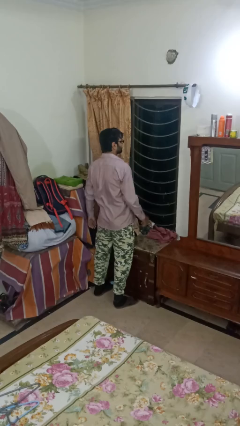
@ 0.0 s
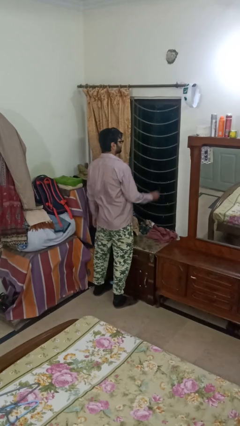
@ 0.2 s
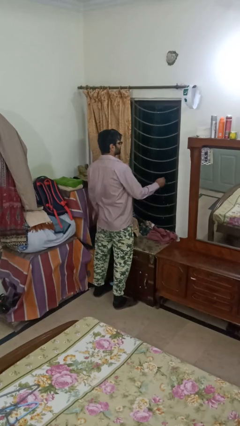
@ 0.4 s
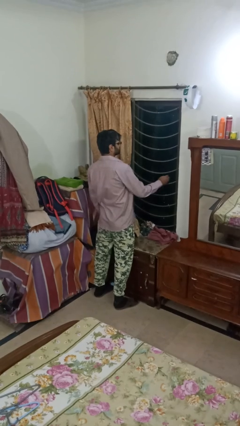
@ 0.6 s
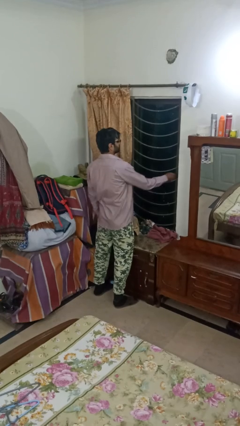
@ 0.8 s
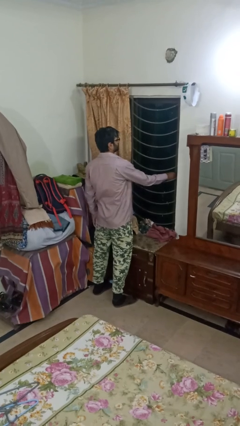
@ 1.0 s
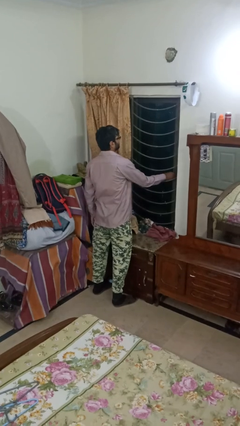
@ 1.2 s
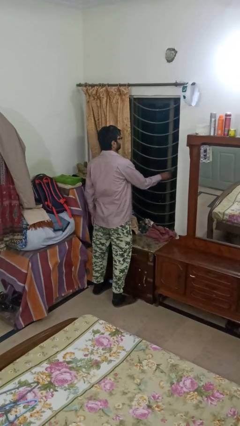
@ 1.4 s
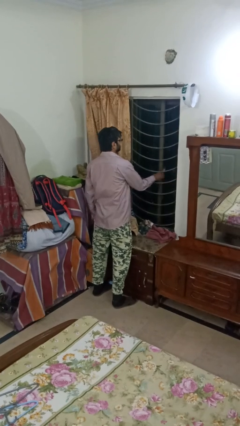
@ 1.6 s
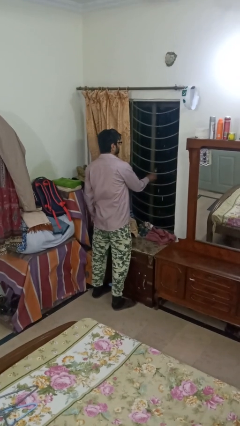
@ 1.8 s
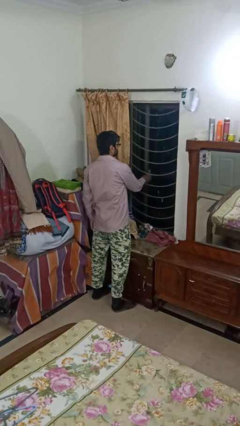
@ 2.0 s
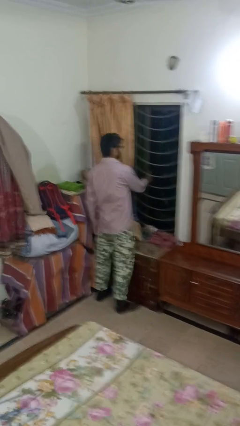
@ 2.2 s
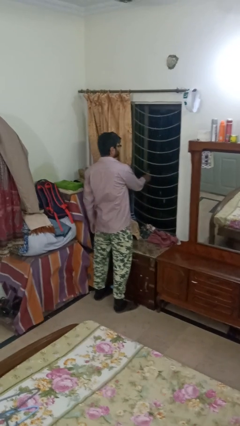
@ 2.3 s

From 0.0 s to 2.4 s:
person opens home window

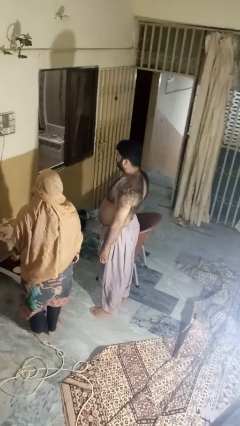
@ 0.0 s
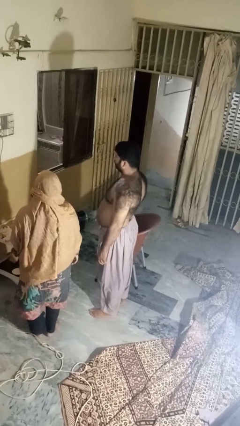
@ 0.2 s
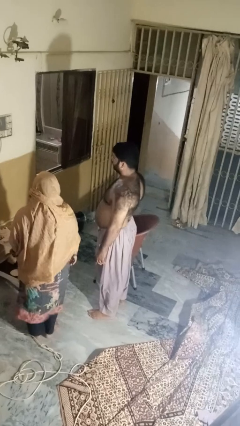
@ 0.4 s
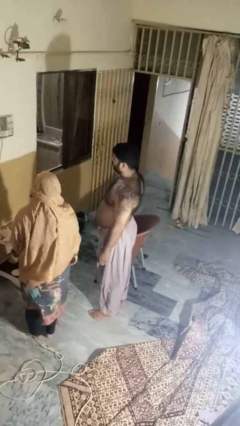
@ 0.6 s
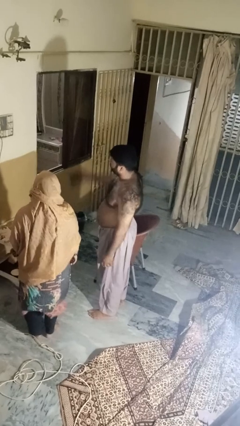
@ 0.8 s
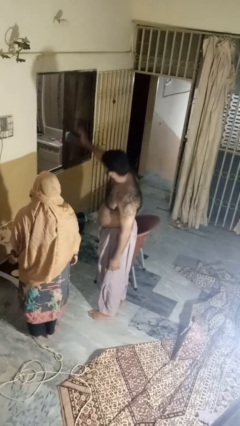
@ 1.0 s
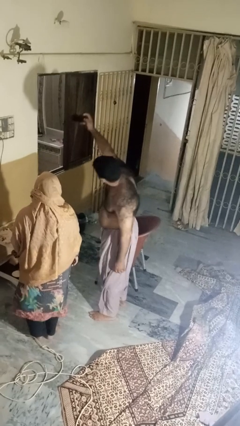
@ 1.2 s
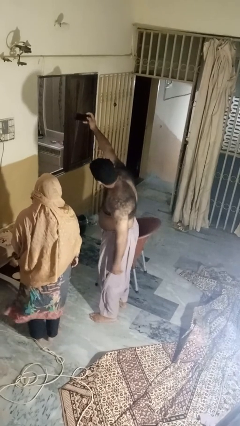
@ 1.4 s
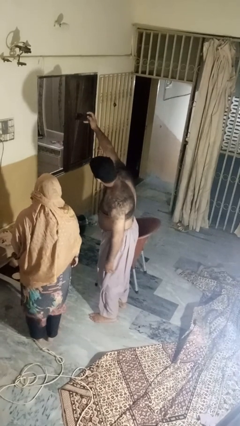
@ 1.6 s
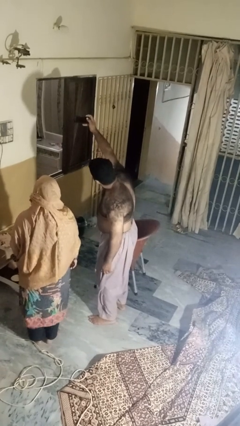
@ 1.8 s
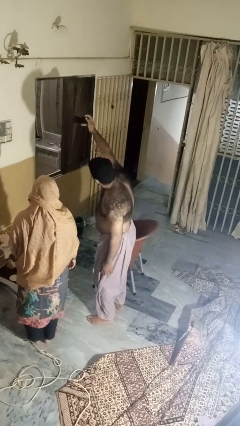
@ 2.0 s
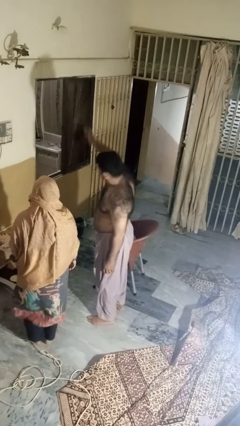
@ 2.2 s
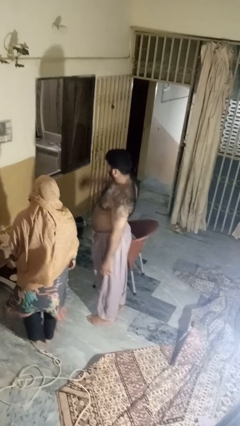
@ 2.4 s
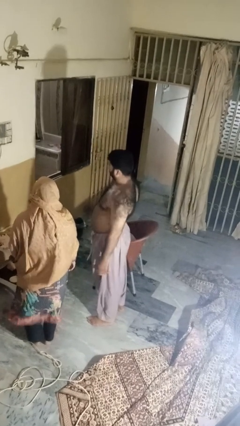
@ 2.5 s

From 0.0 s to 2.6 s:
person takes selfie with person

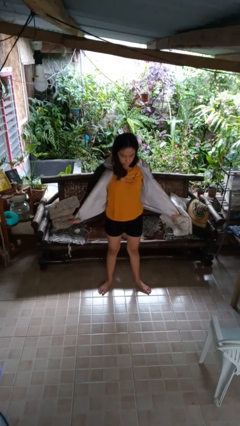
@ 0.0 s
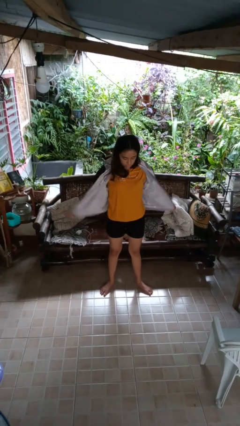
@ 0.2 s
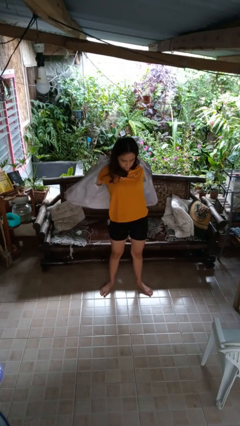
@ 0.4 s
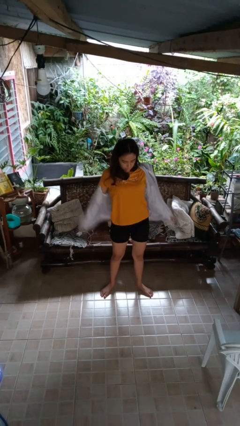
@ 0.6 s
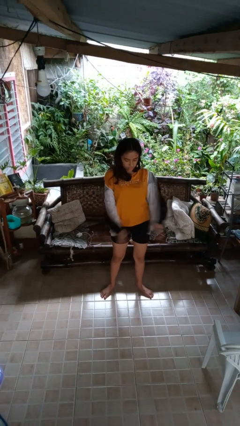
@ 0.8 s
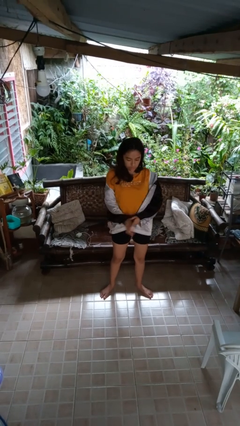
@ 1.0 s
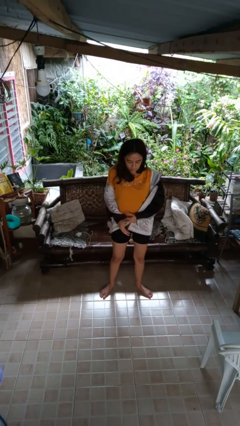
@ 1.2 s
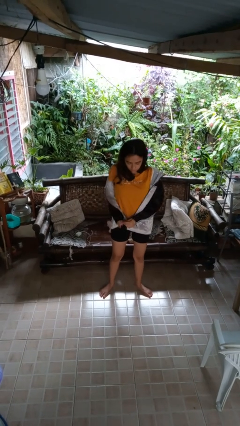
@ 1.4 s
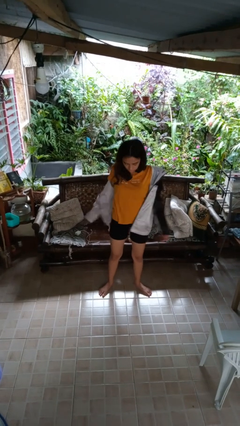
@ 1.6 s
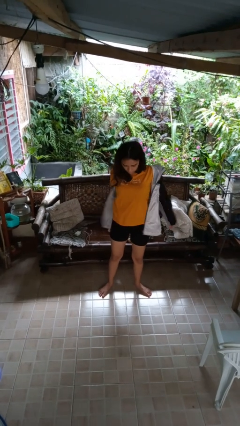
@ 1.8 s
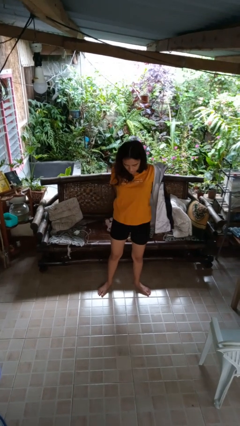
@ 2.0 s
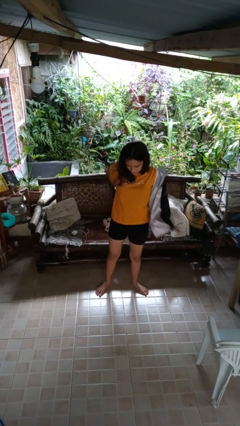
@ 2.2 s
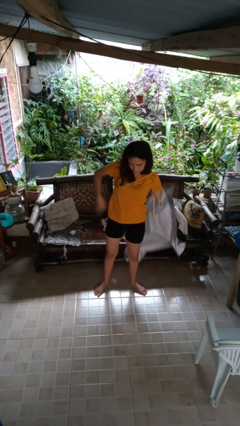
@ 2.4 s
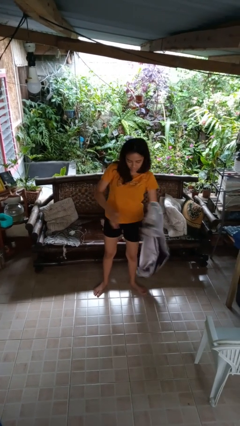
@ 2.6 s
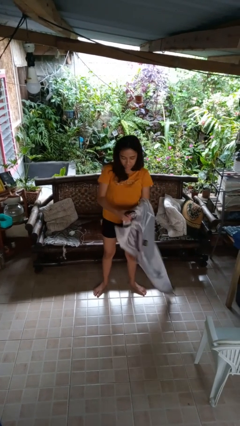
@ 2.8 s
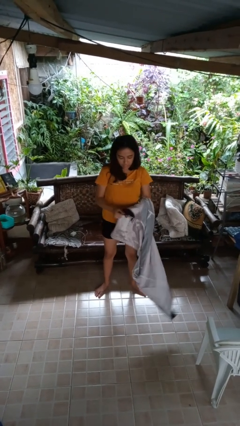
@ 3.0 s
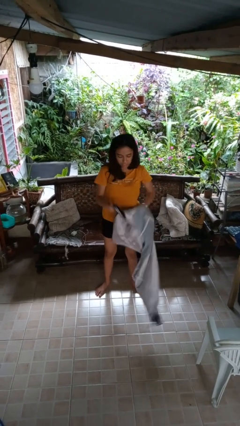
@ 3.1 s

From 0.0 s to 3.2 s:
person takes off jacket

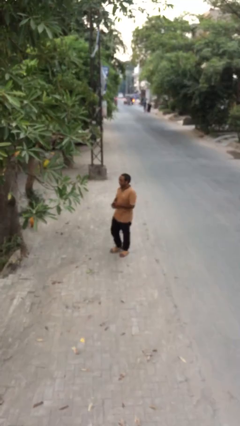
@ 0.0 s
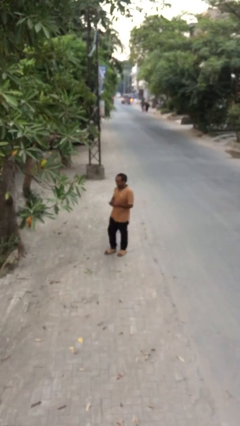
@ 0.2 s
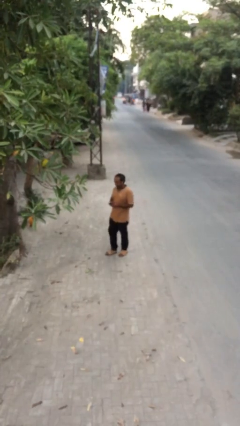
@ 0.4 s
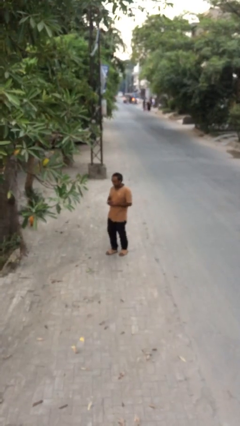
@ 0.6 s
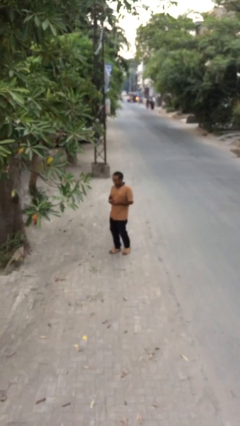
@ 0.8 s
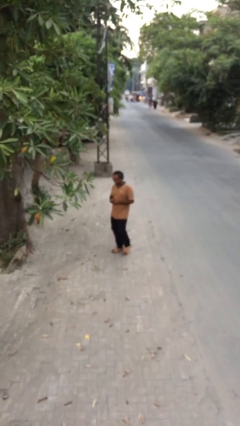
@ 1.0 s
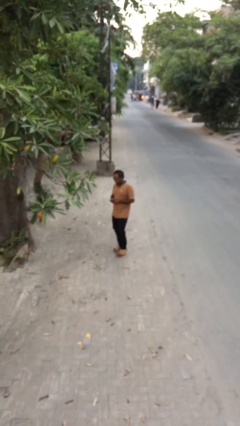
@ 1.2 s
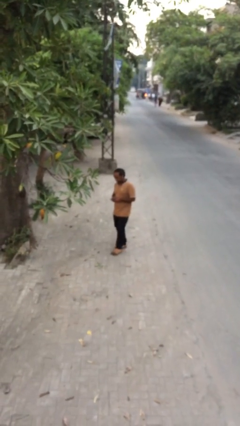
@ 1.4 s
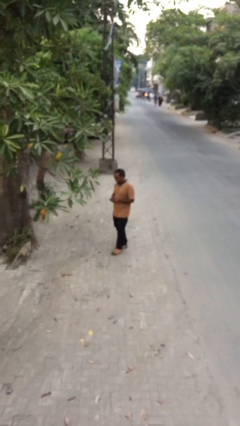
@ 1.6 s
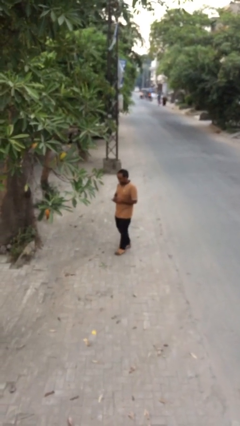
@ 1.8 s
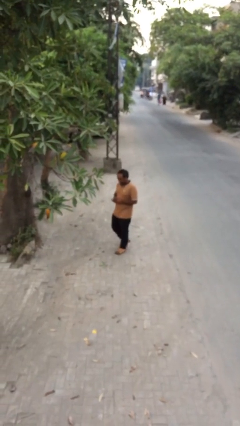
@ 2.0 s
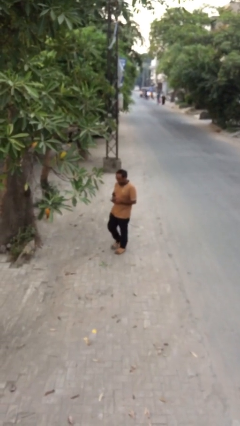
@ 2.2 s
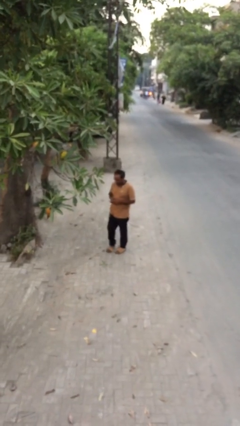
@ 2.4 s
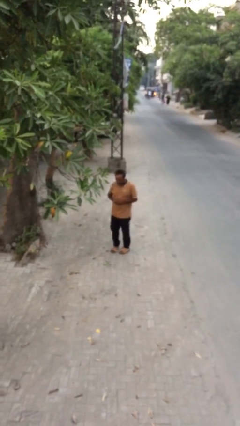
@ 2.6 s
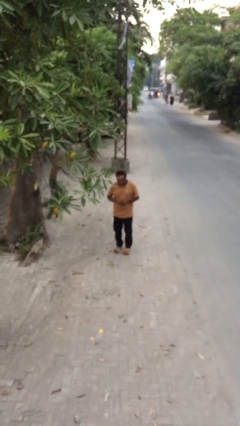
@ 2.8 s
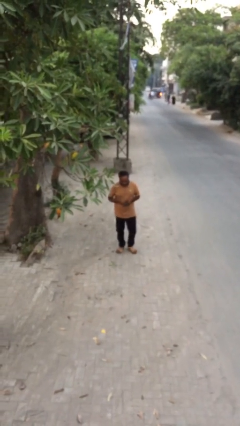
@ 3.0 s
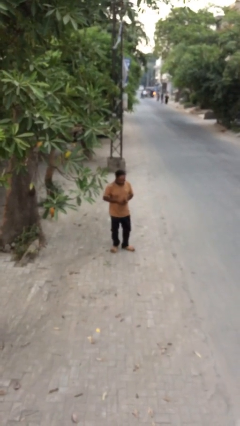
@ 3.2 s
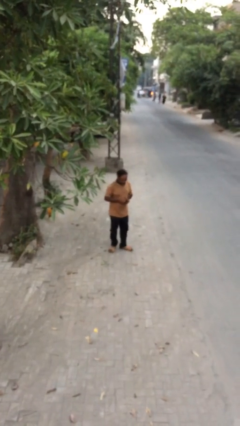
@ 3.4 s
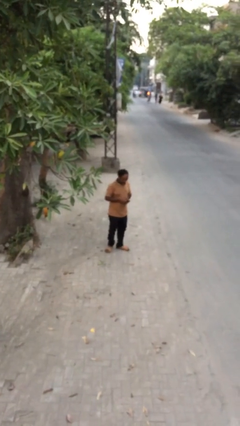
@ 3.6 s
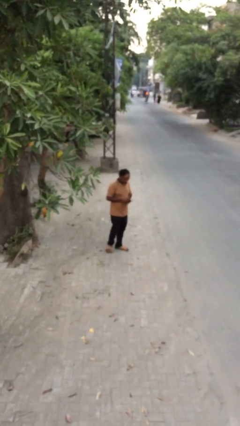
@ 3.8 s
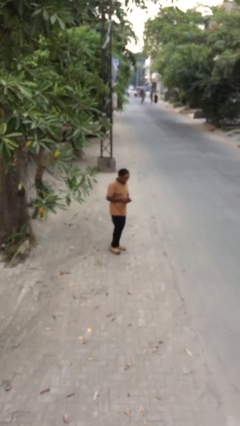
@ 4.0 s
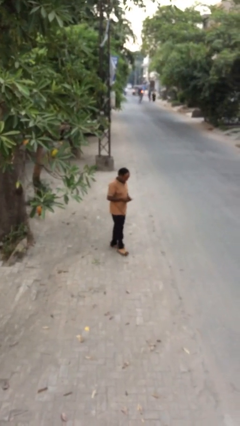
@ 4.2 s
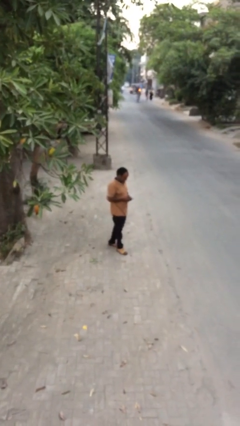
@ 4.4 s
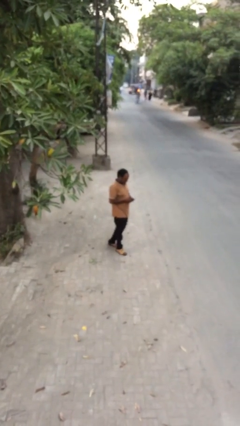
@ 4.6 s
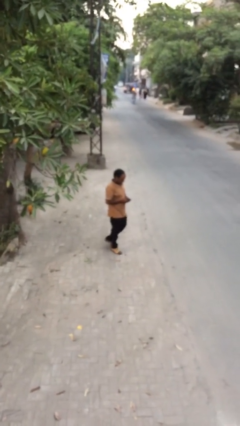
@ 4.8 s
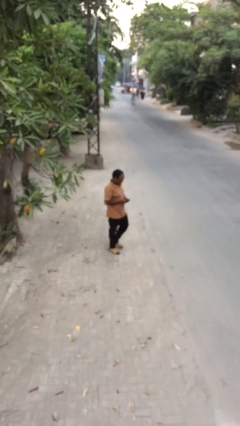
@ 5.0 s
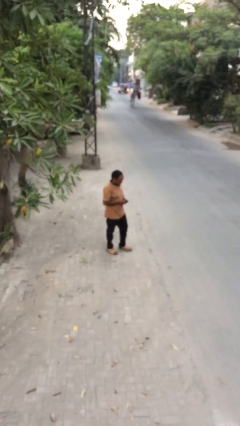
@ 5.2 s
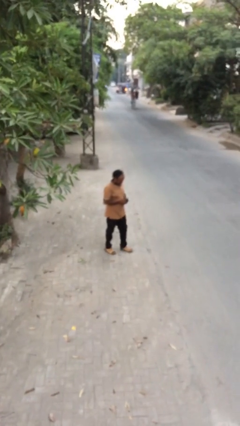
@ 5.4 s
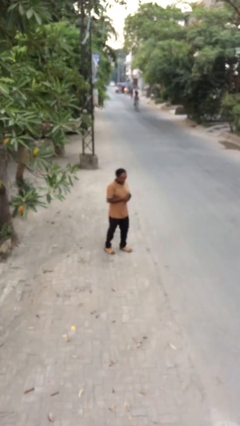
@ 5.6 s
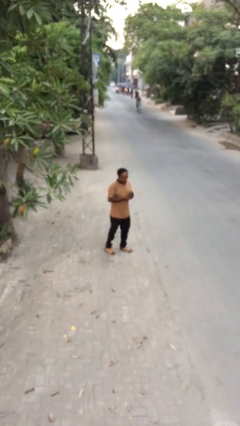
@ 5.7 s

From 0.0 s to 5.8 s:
person texts on phone

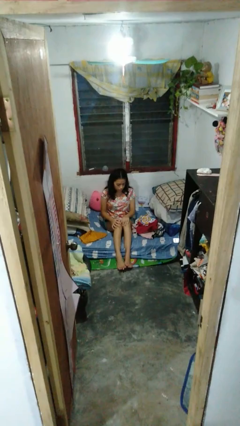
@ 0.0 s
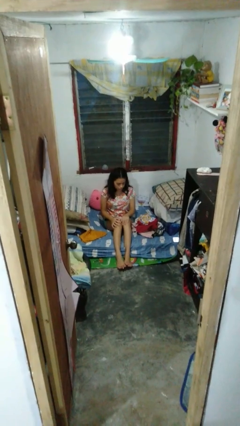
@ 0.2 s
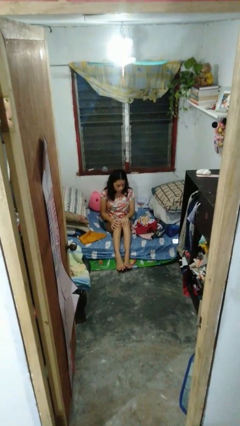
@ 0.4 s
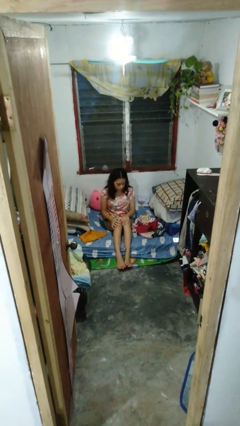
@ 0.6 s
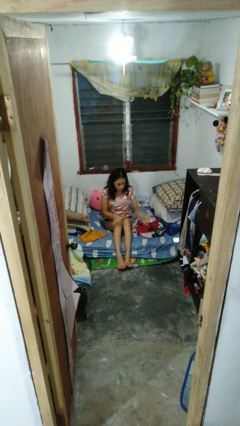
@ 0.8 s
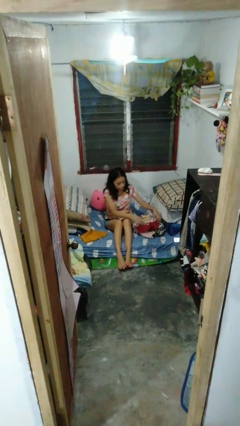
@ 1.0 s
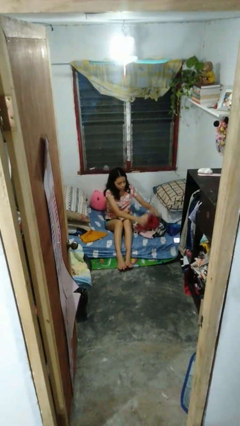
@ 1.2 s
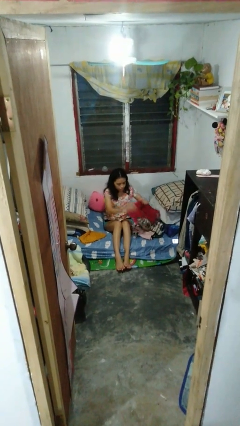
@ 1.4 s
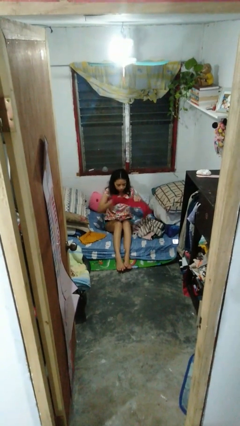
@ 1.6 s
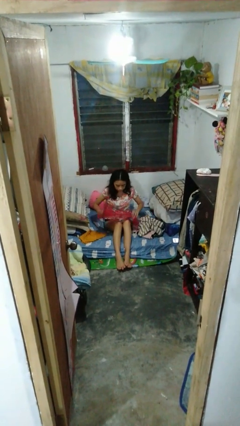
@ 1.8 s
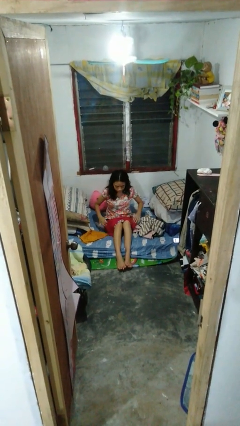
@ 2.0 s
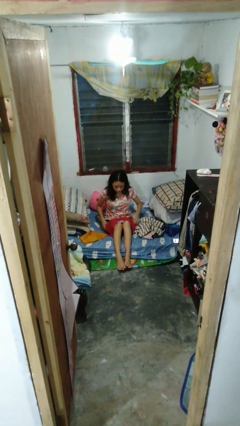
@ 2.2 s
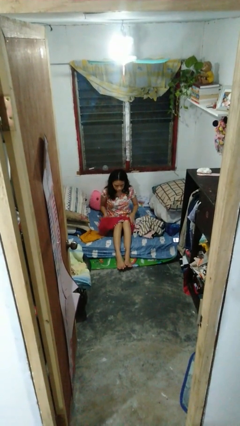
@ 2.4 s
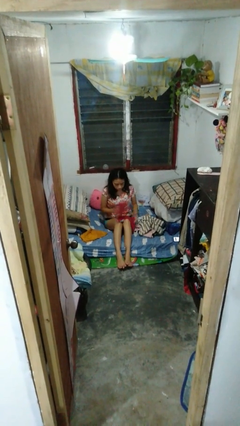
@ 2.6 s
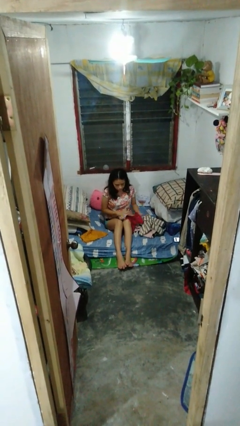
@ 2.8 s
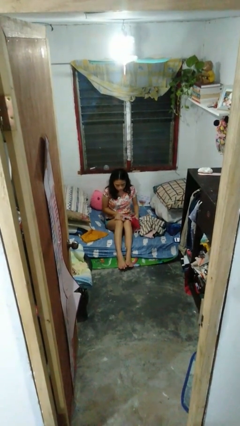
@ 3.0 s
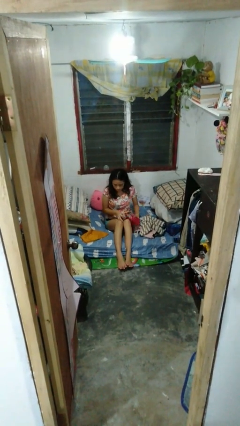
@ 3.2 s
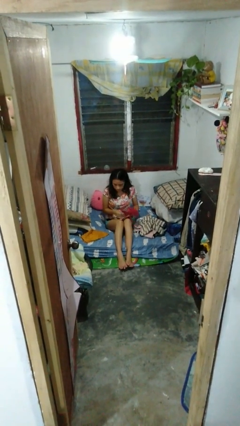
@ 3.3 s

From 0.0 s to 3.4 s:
person folds shirt
